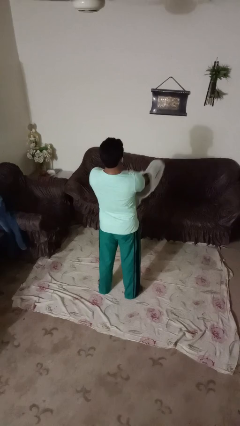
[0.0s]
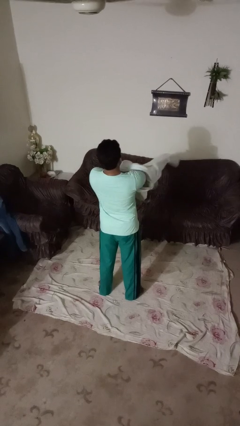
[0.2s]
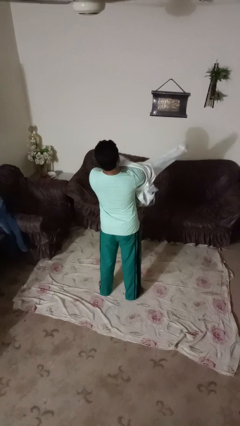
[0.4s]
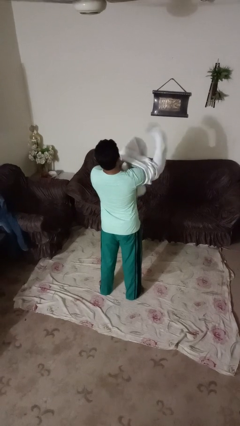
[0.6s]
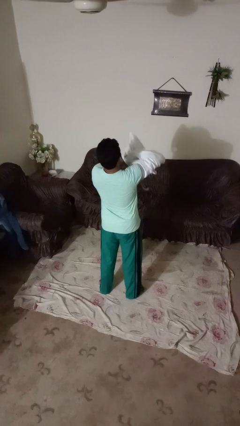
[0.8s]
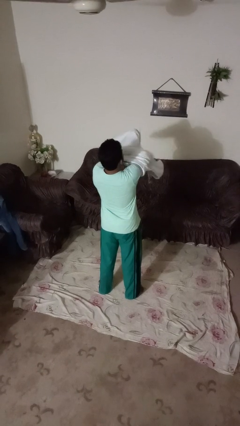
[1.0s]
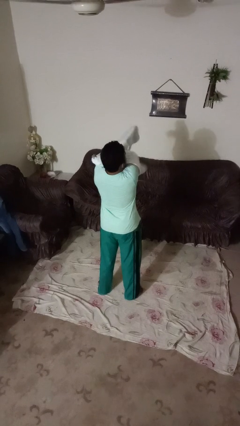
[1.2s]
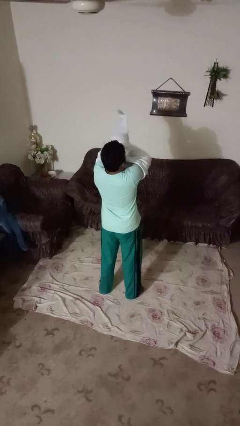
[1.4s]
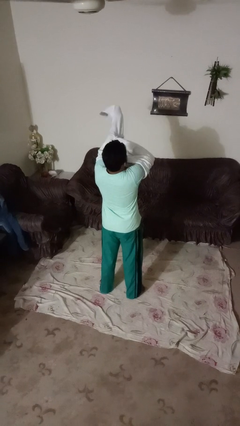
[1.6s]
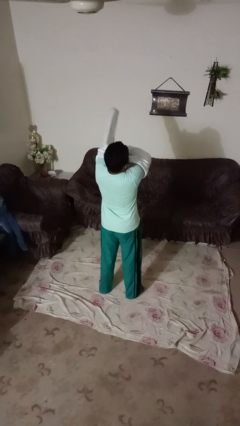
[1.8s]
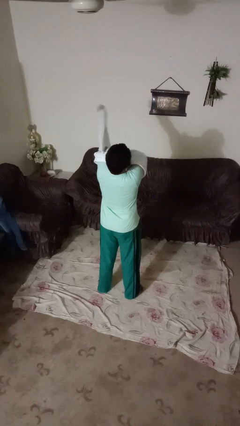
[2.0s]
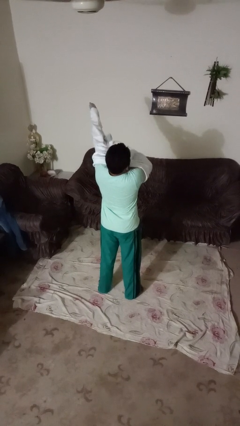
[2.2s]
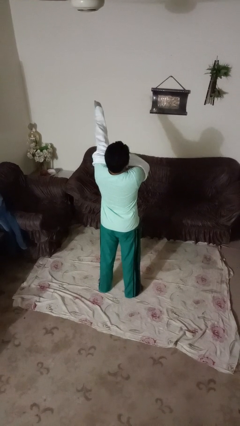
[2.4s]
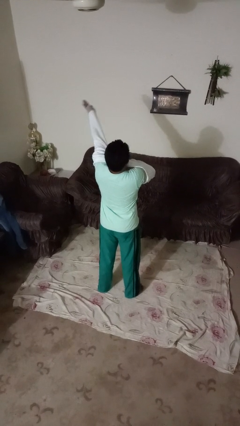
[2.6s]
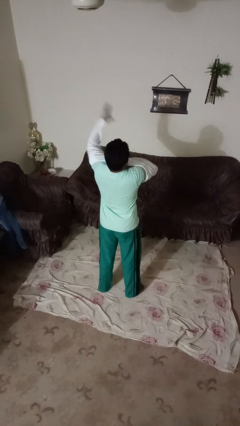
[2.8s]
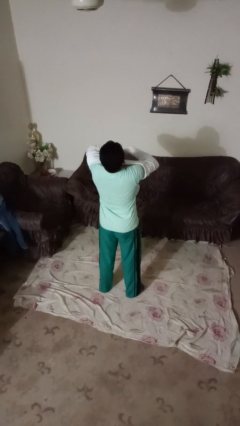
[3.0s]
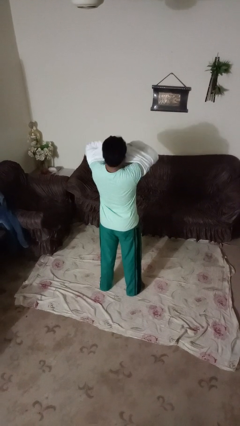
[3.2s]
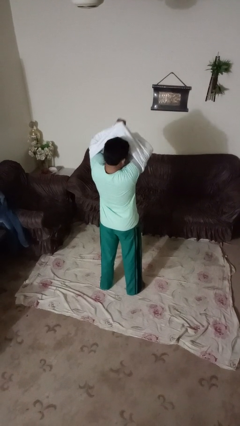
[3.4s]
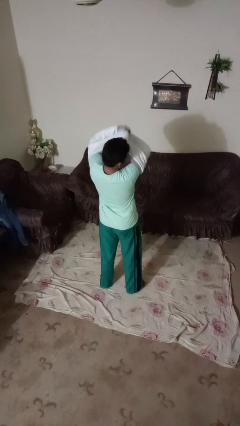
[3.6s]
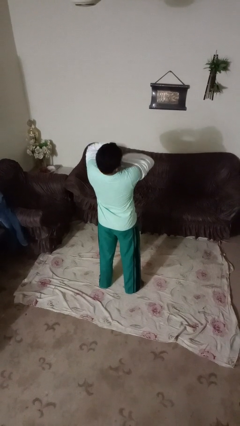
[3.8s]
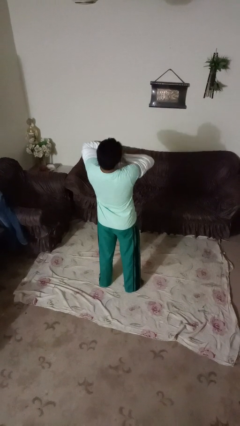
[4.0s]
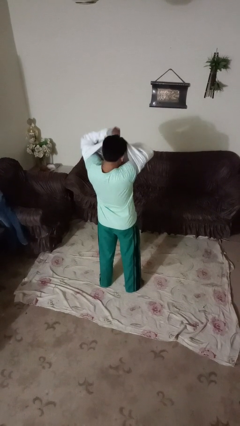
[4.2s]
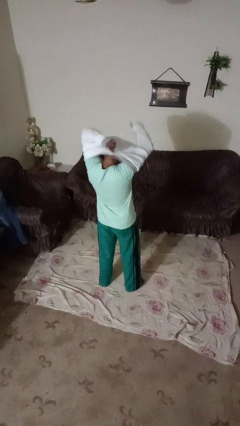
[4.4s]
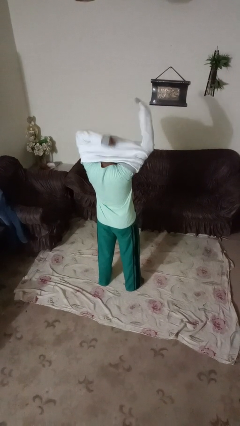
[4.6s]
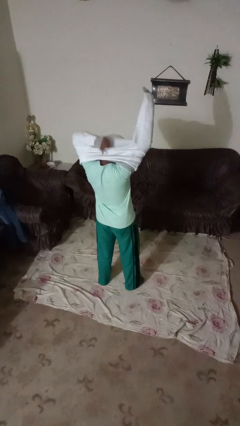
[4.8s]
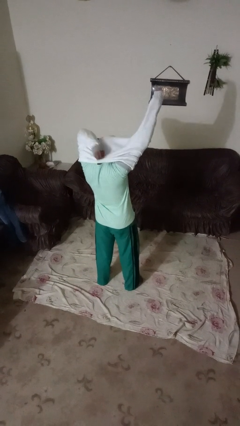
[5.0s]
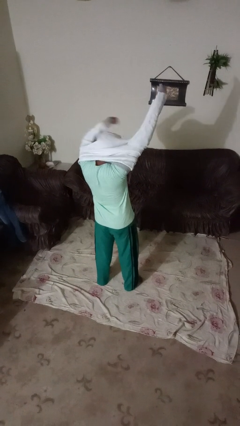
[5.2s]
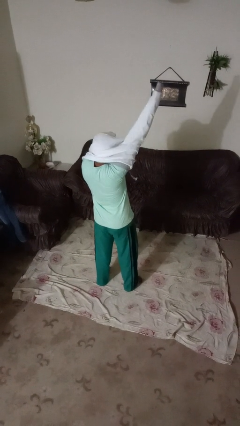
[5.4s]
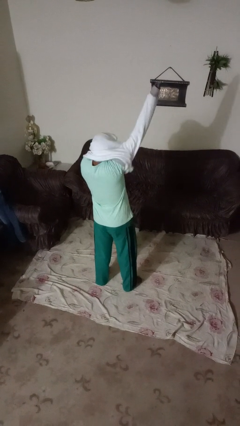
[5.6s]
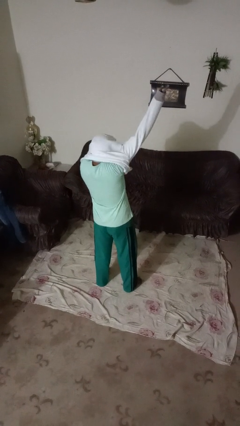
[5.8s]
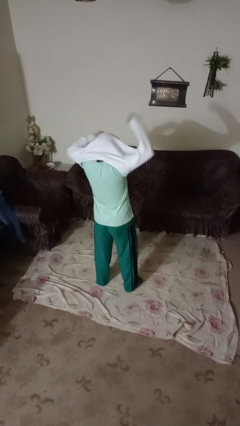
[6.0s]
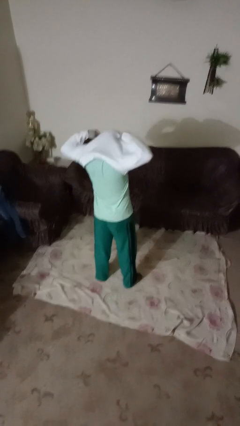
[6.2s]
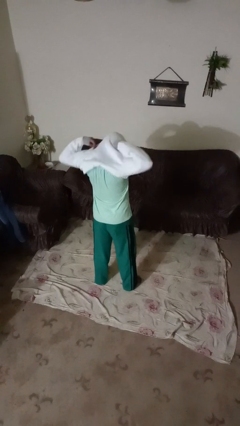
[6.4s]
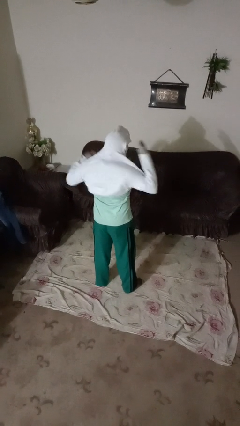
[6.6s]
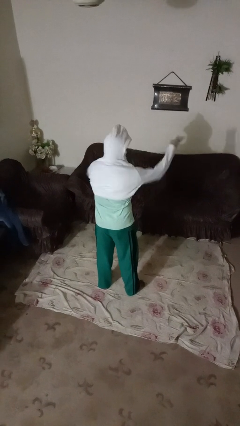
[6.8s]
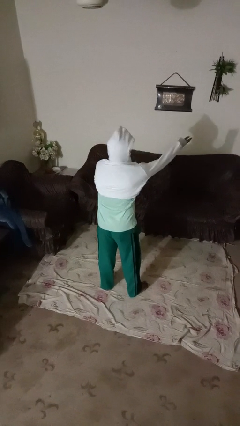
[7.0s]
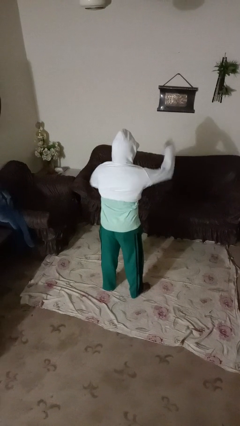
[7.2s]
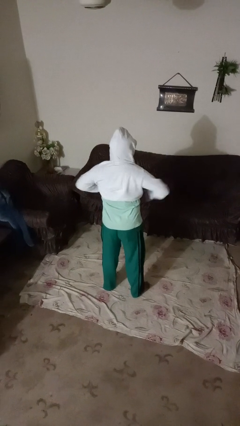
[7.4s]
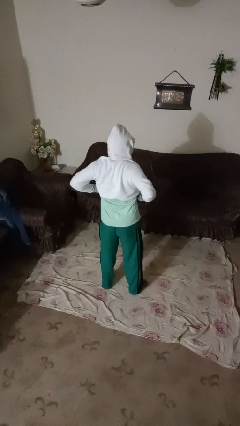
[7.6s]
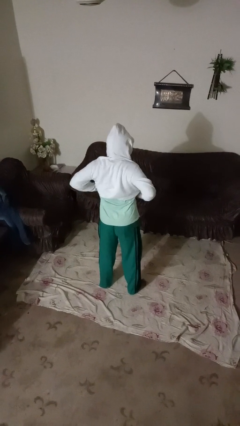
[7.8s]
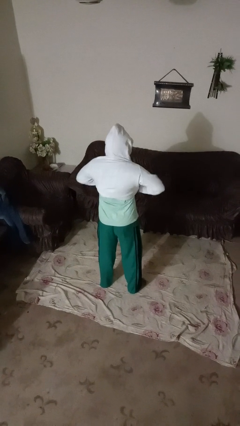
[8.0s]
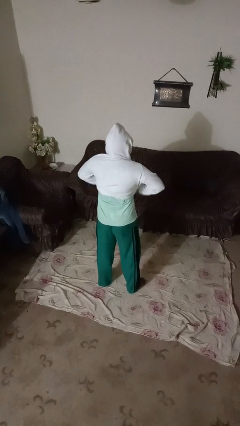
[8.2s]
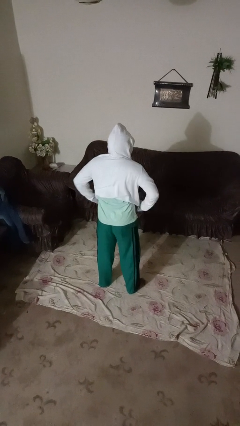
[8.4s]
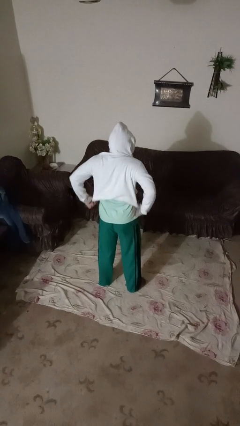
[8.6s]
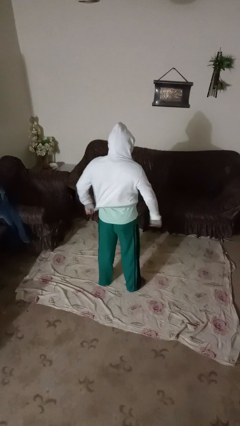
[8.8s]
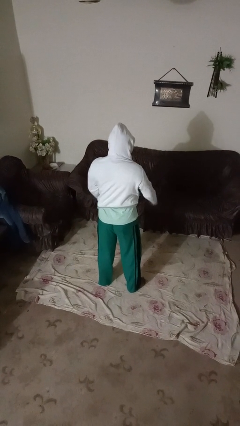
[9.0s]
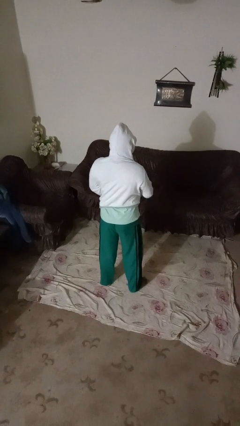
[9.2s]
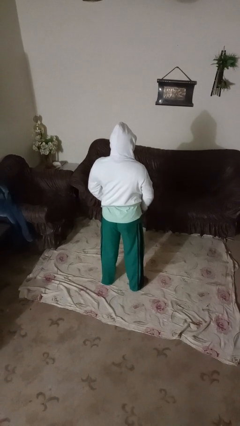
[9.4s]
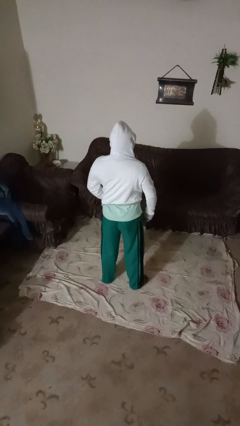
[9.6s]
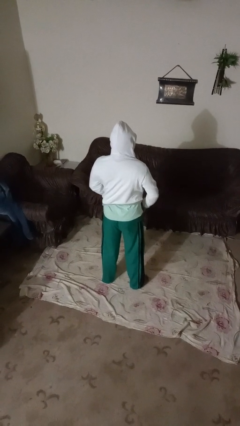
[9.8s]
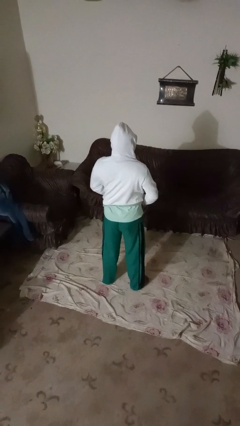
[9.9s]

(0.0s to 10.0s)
person puts on hoodie

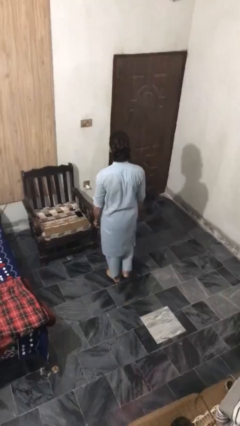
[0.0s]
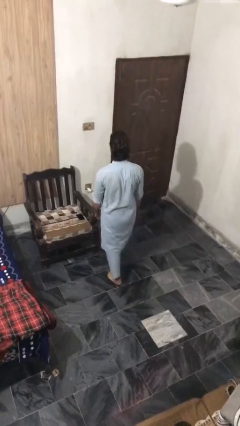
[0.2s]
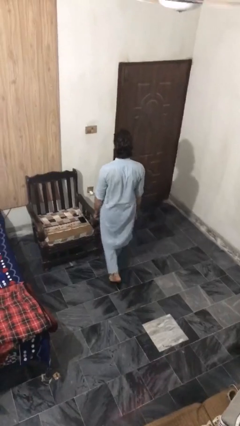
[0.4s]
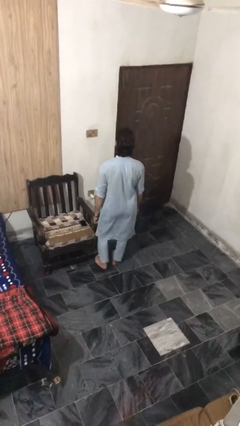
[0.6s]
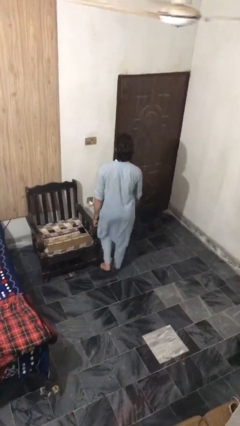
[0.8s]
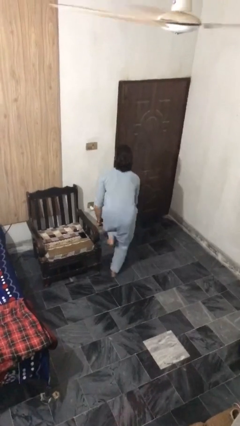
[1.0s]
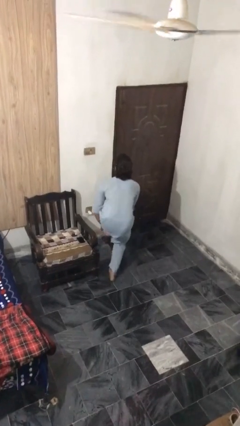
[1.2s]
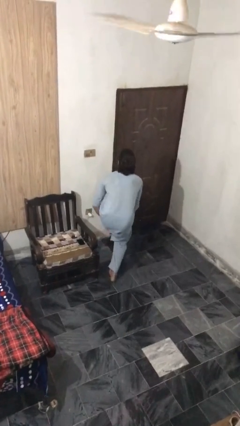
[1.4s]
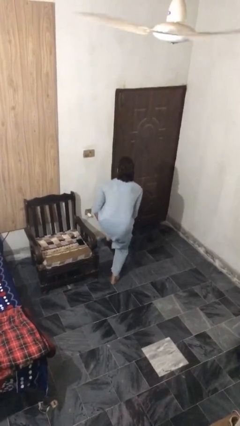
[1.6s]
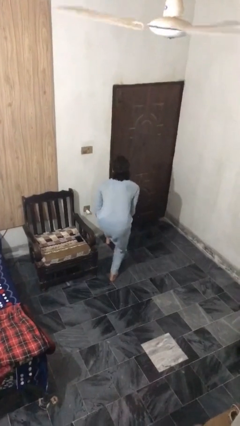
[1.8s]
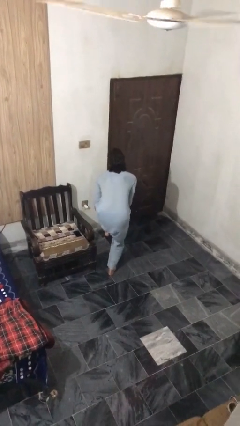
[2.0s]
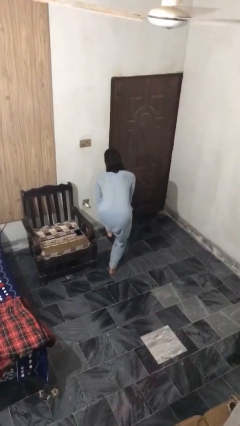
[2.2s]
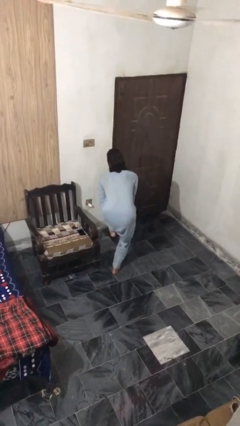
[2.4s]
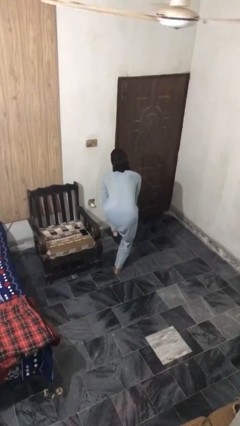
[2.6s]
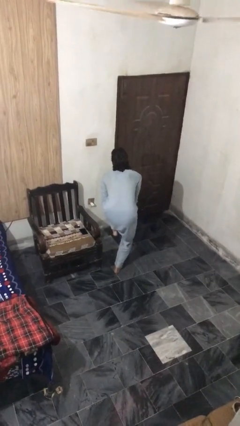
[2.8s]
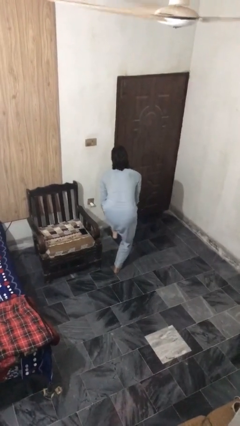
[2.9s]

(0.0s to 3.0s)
person stubs toe

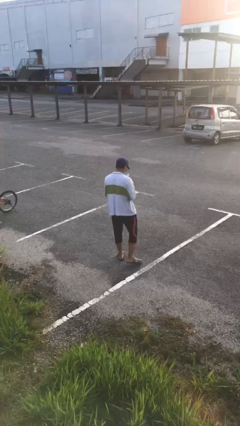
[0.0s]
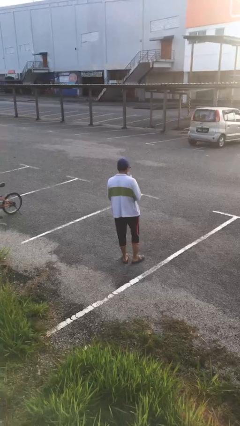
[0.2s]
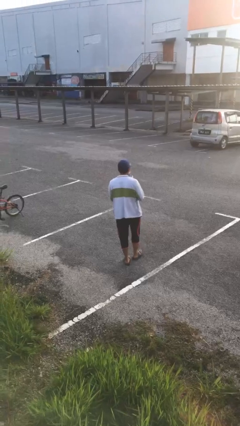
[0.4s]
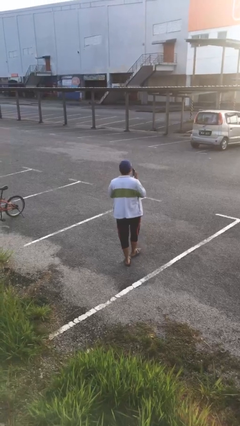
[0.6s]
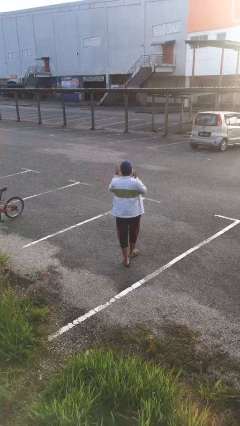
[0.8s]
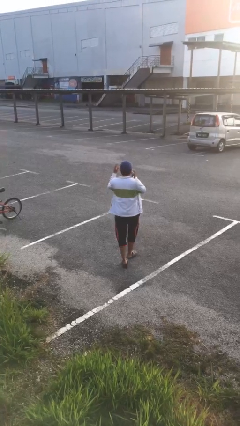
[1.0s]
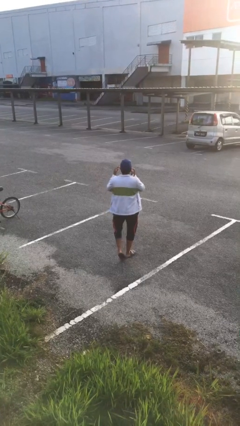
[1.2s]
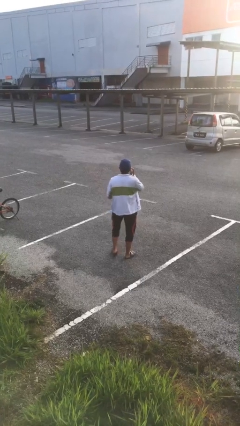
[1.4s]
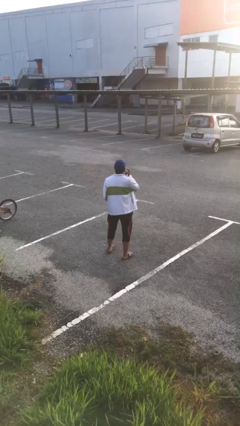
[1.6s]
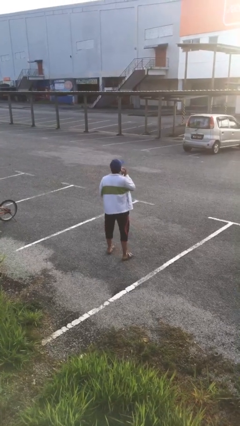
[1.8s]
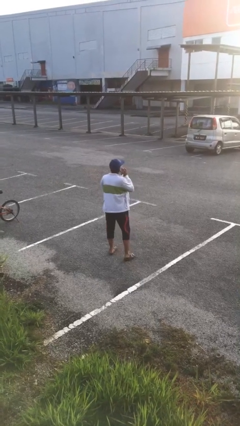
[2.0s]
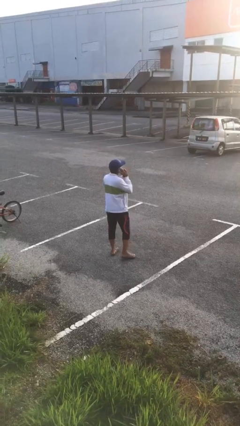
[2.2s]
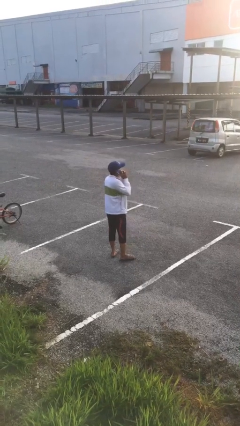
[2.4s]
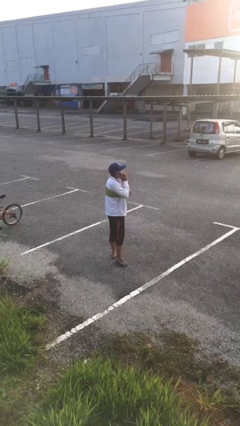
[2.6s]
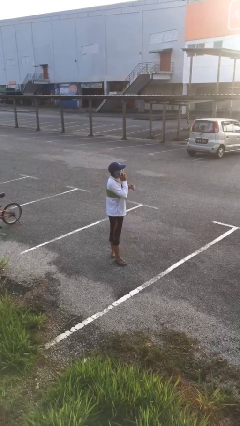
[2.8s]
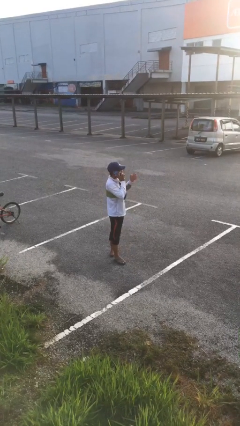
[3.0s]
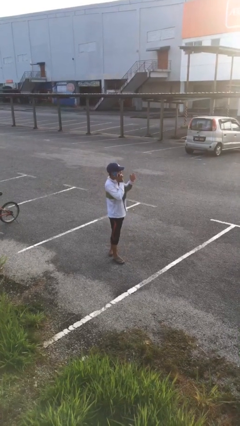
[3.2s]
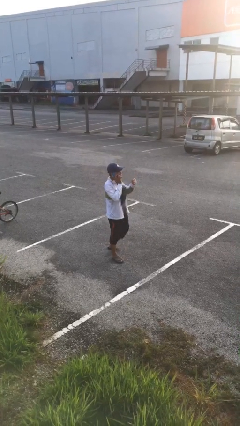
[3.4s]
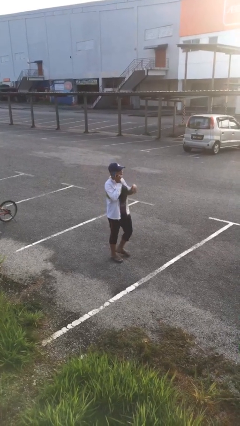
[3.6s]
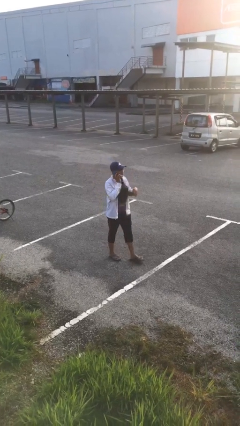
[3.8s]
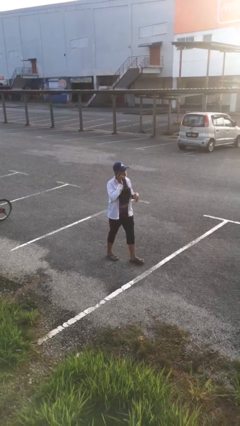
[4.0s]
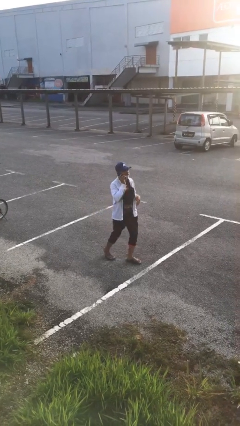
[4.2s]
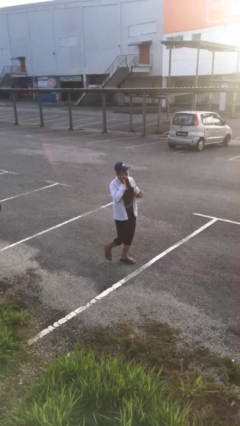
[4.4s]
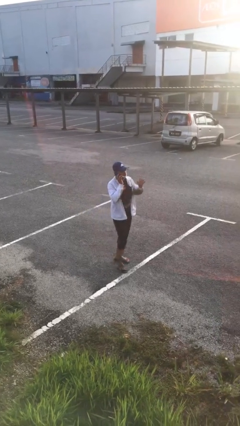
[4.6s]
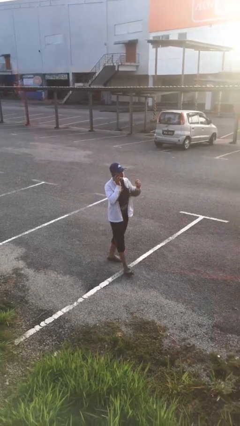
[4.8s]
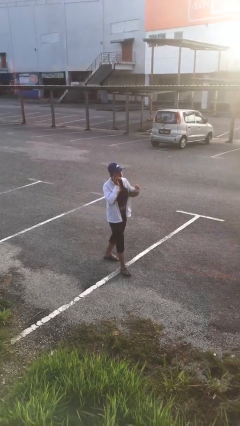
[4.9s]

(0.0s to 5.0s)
person talks on phone

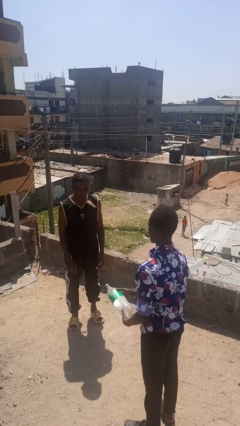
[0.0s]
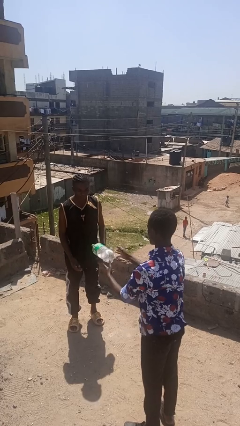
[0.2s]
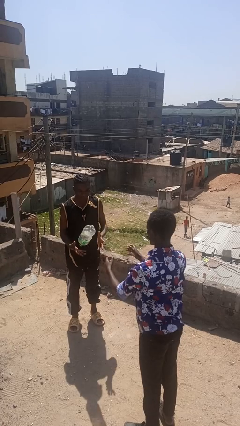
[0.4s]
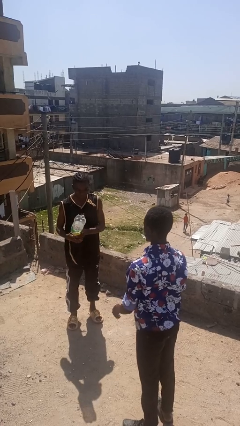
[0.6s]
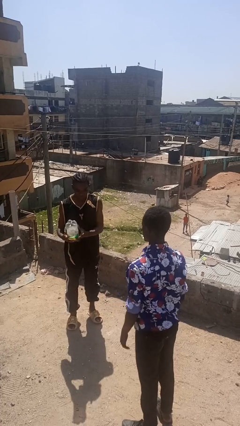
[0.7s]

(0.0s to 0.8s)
person throws object to person
